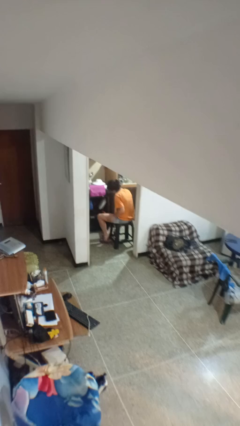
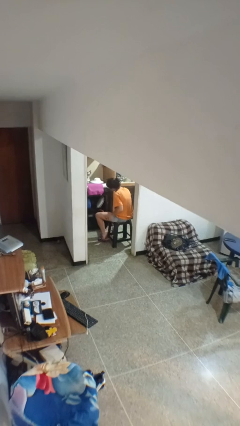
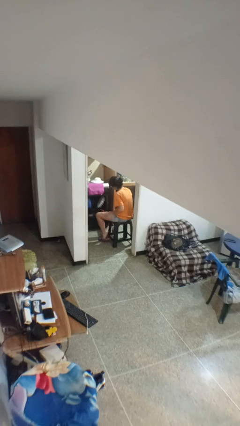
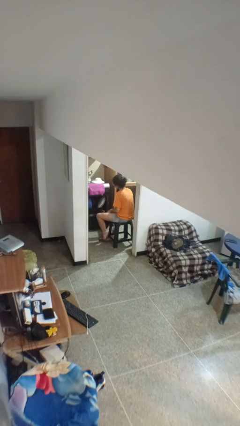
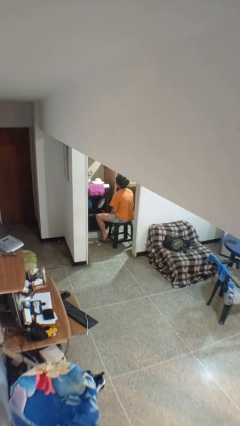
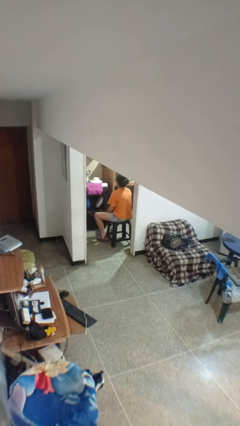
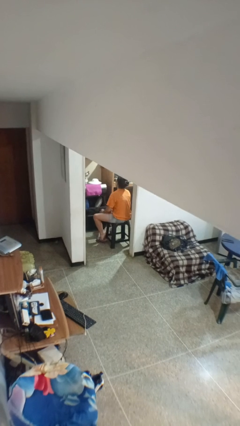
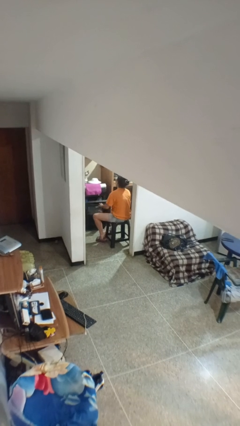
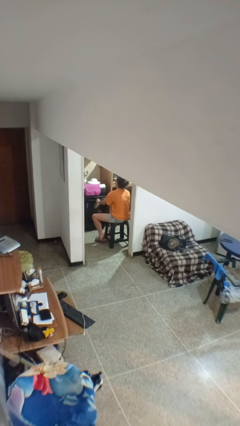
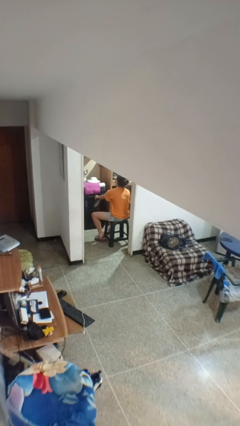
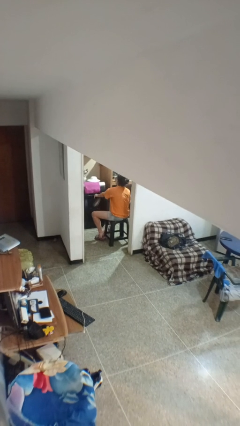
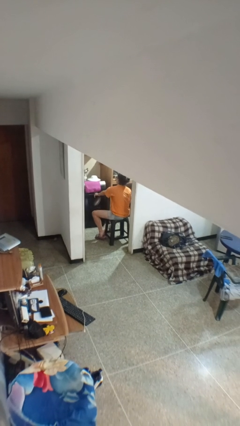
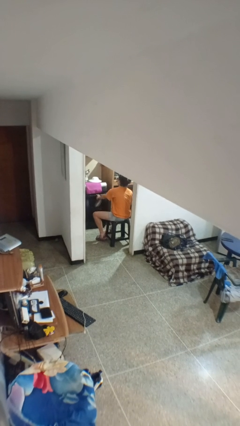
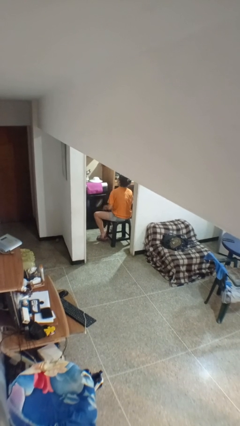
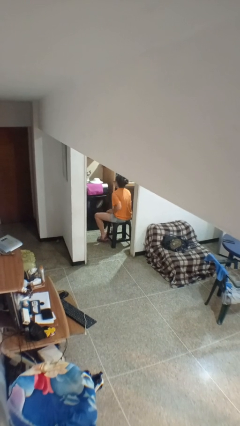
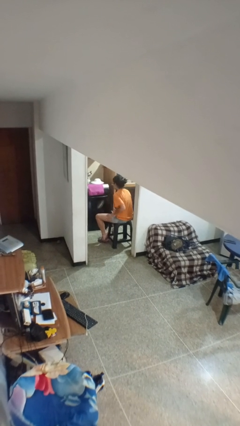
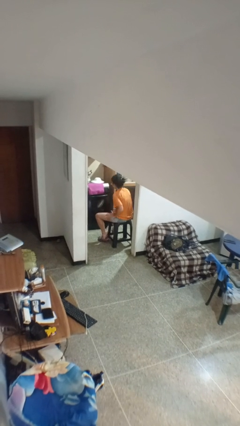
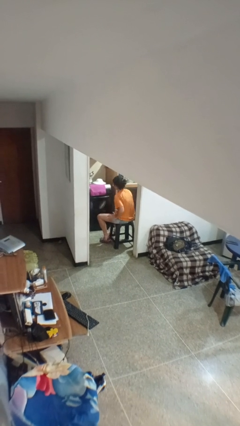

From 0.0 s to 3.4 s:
person closes dishwasher

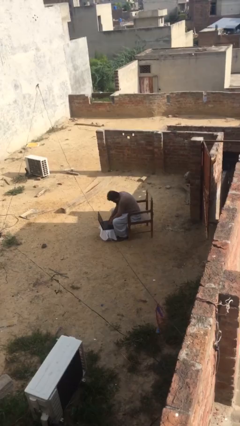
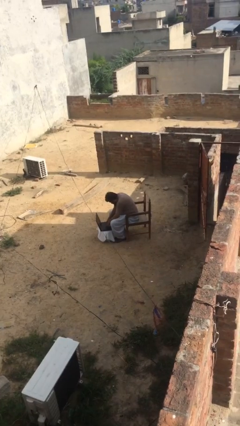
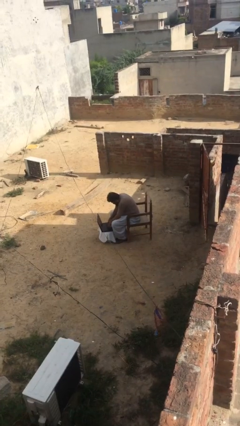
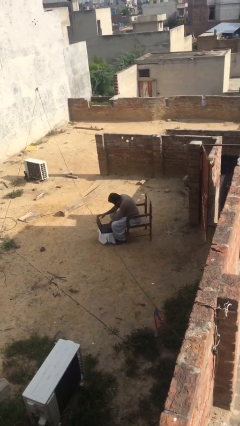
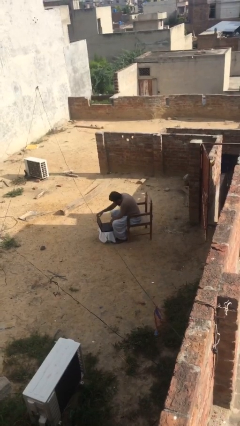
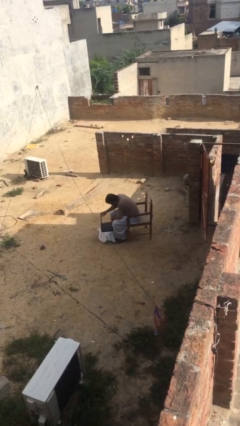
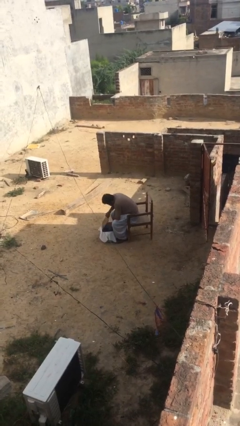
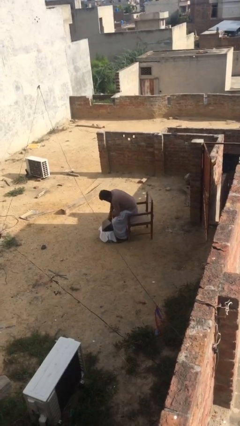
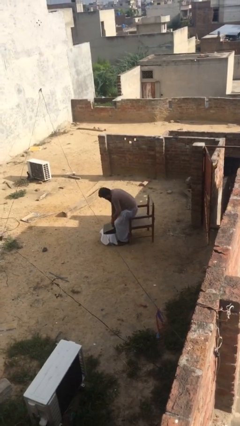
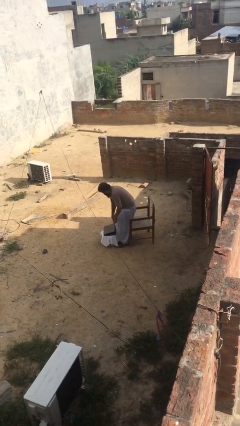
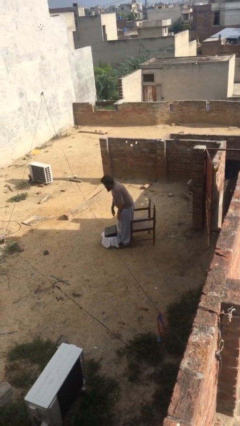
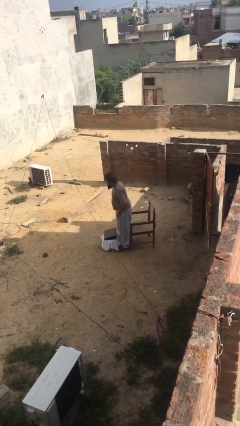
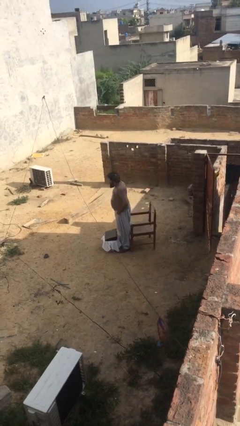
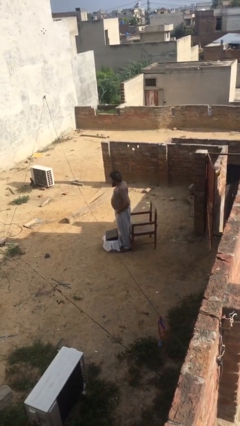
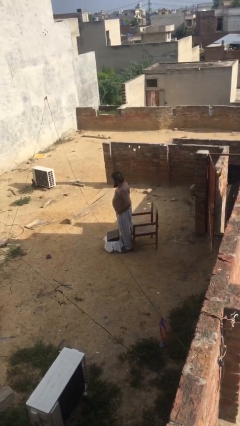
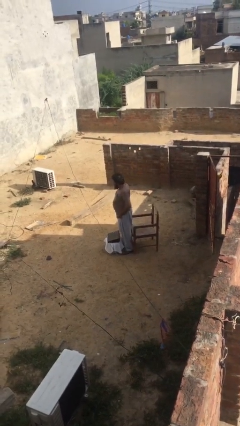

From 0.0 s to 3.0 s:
person stands up

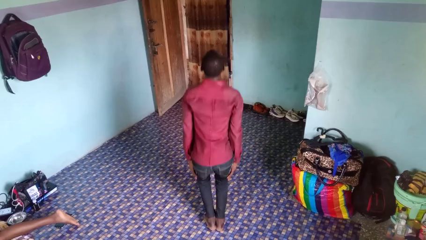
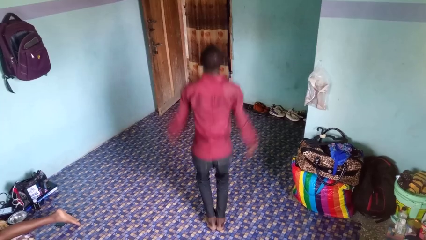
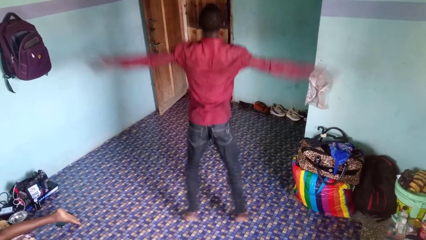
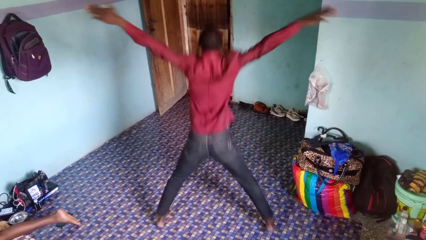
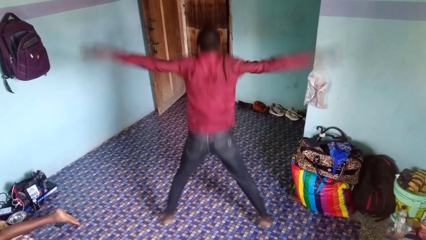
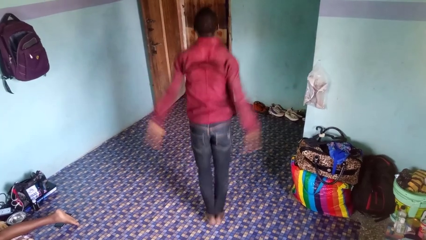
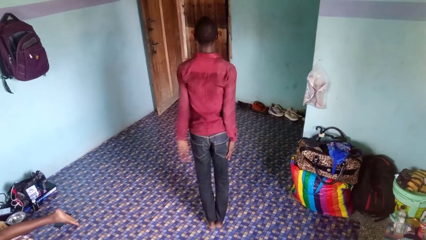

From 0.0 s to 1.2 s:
person exercises with jumping jacks

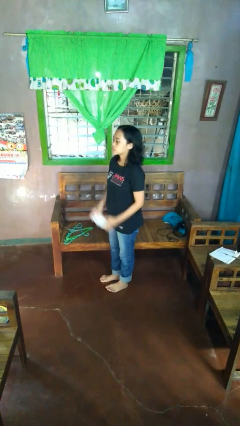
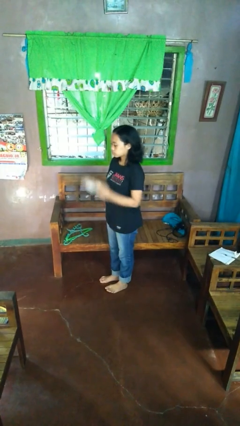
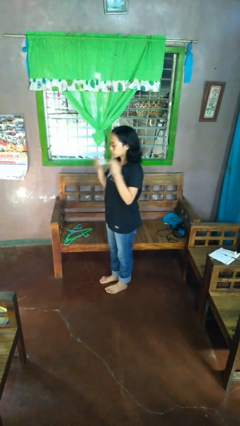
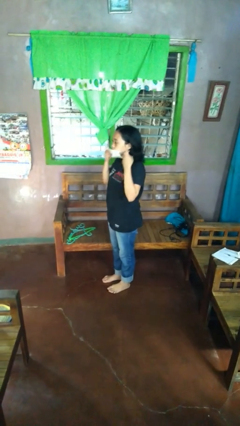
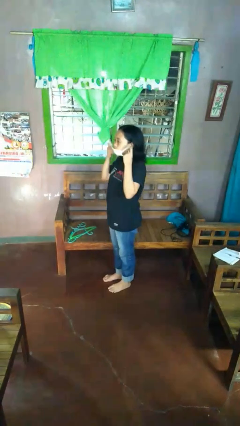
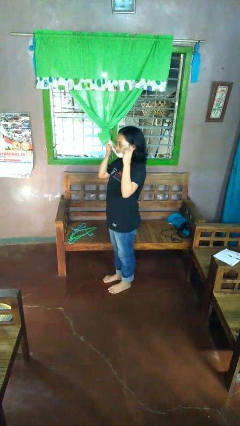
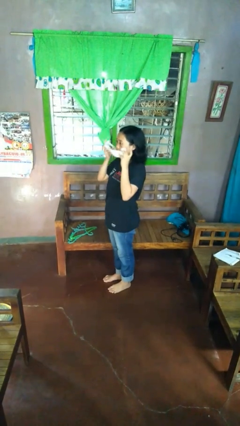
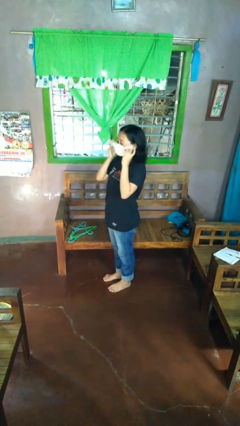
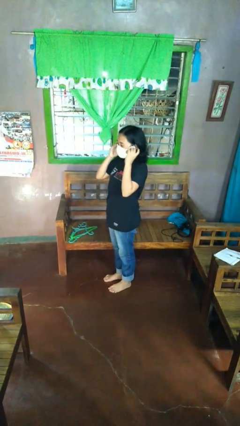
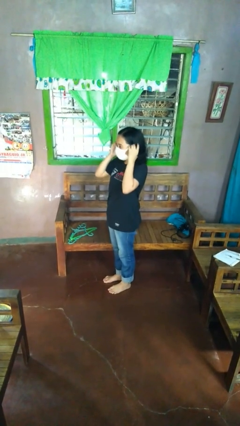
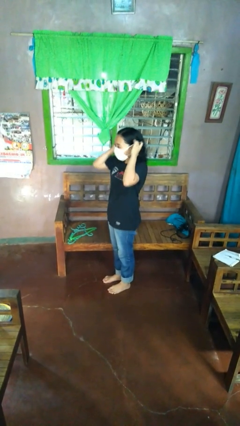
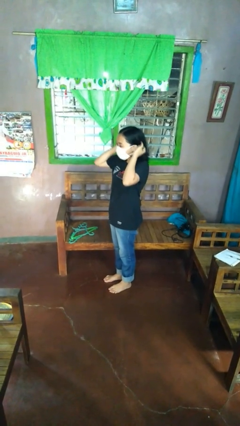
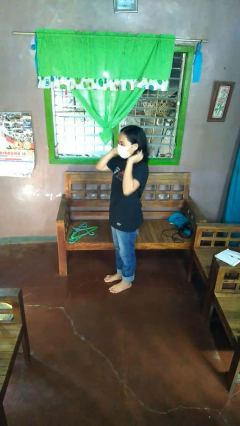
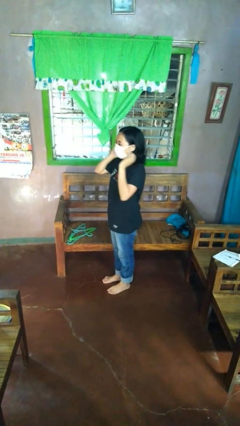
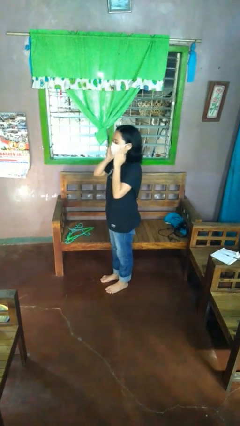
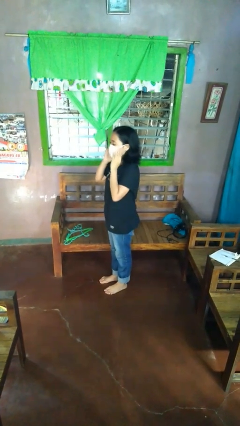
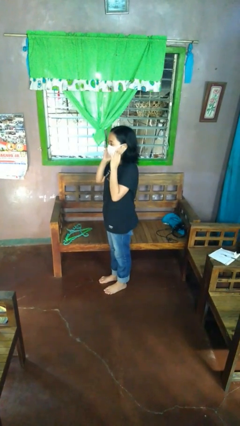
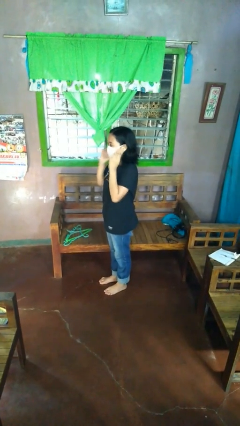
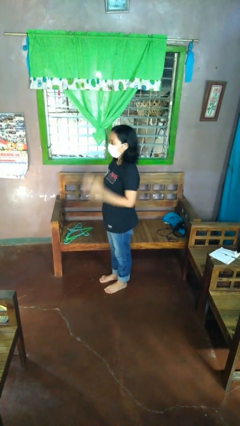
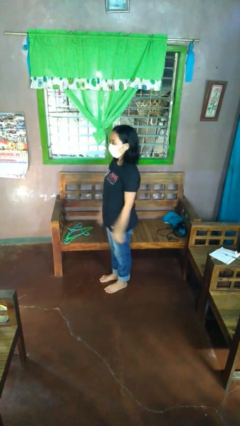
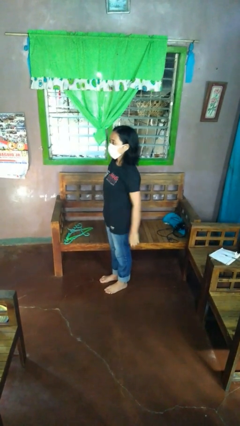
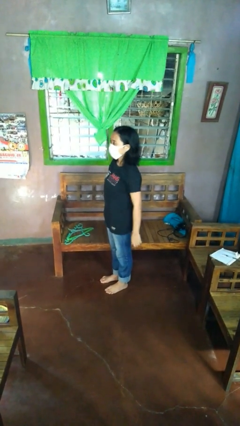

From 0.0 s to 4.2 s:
person puts on facemask

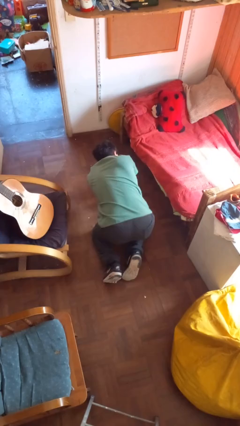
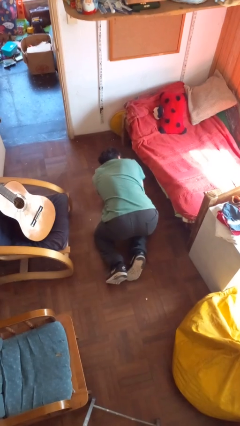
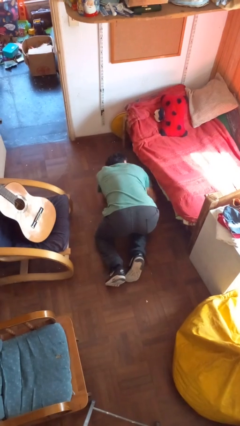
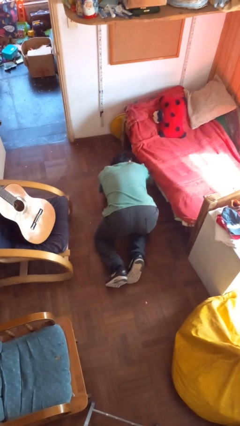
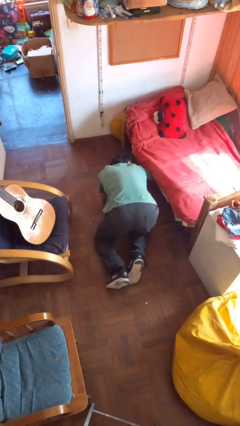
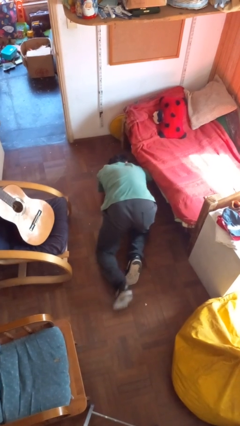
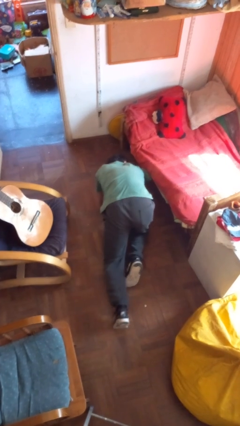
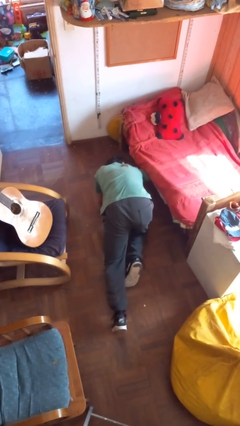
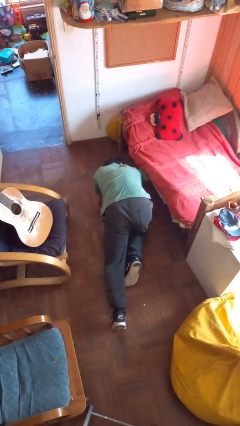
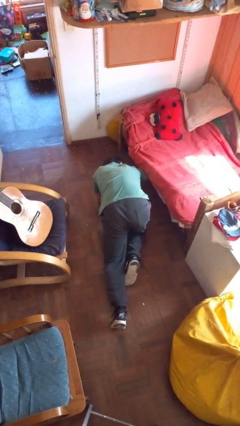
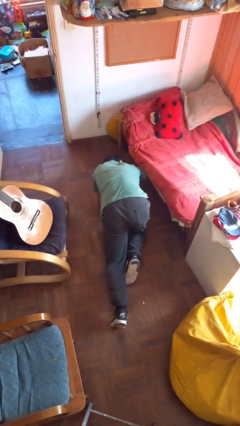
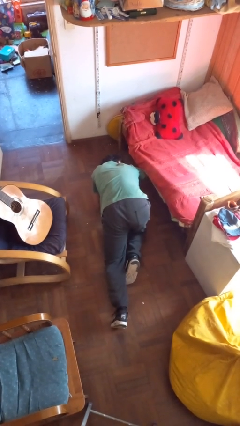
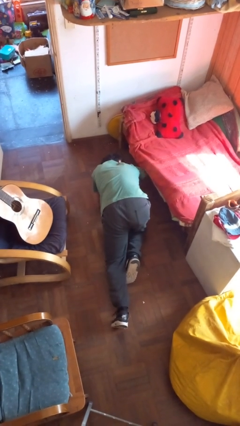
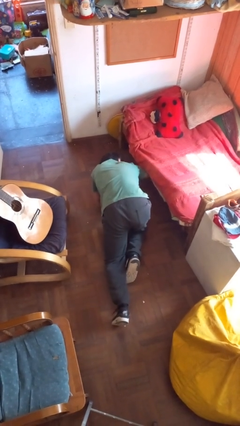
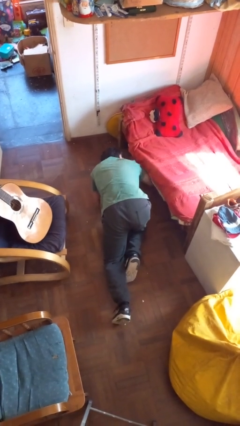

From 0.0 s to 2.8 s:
person searches under bed

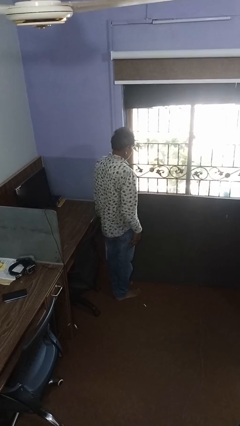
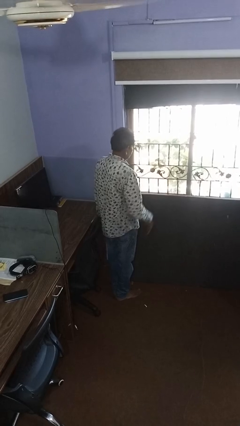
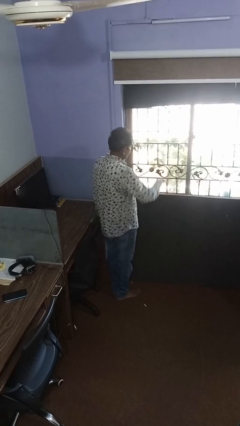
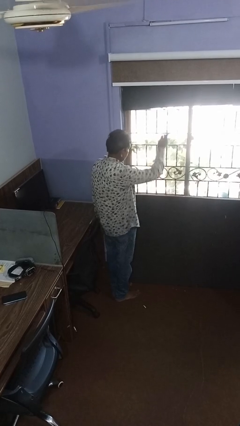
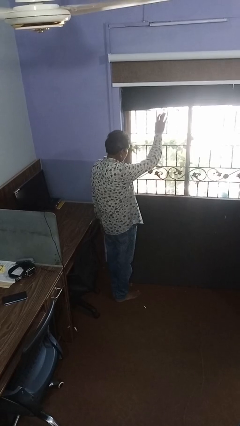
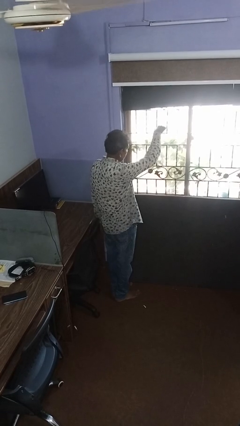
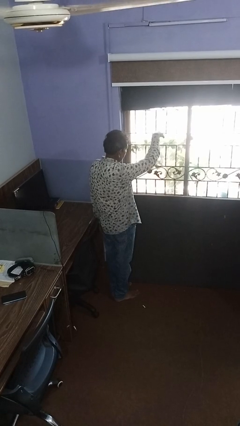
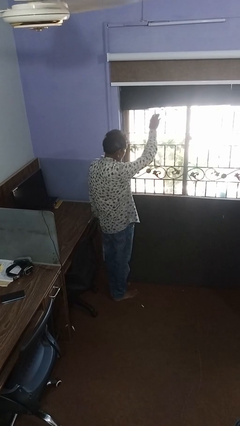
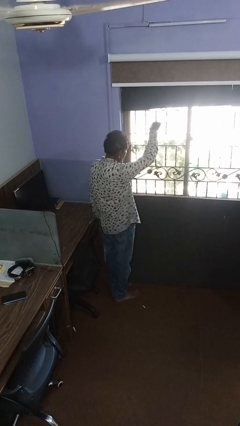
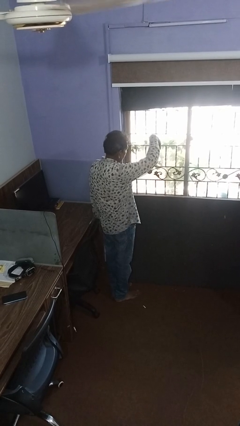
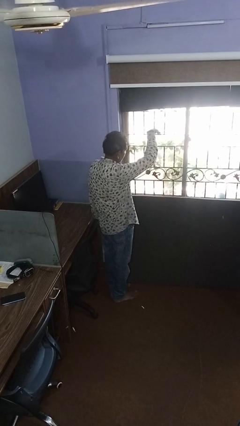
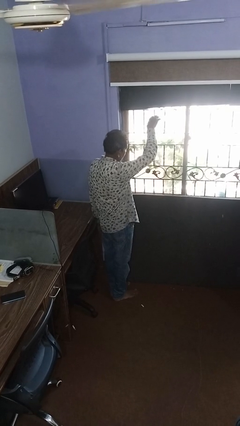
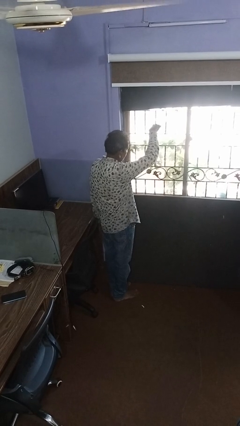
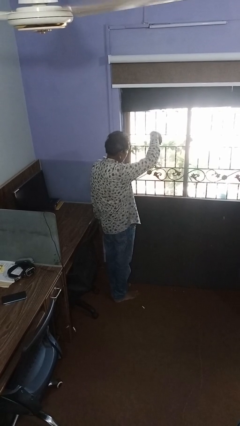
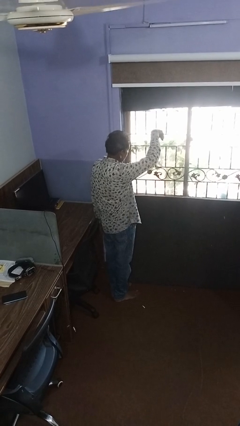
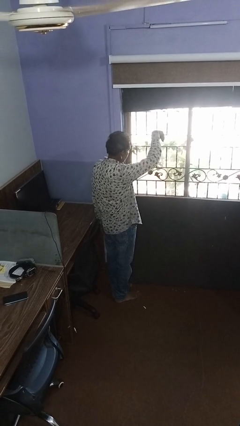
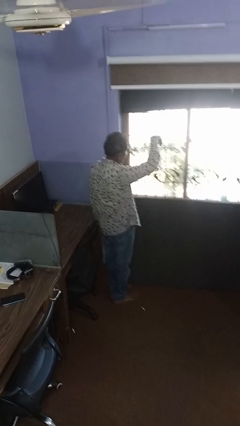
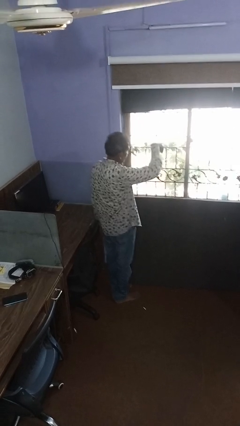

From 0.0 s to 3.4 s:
person gestures come here
